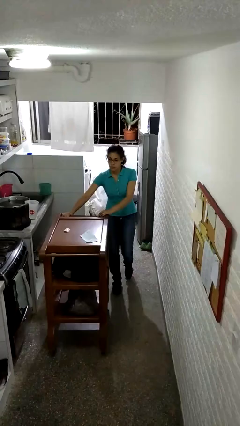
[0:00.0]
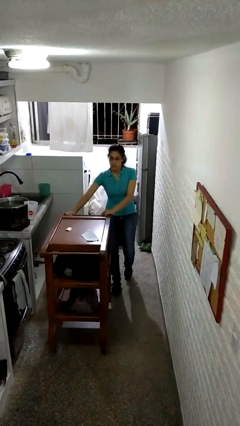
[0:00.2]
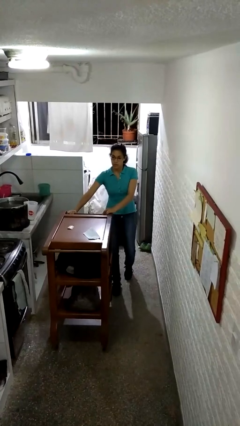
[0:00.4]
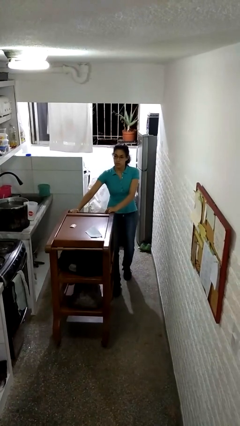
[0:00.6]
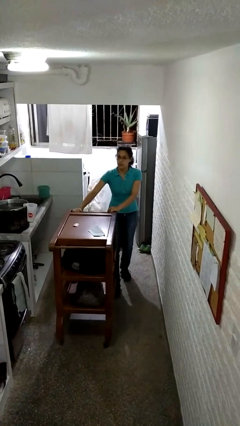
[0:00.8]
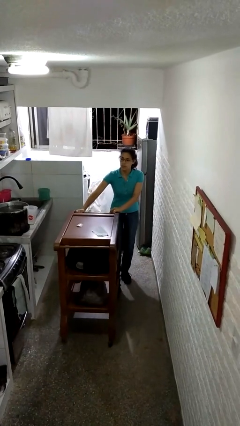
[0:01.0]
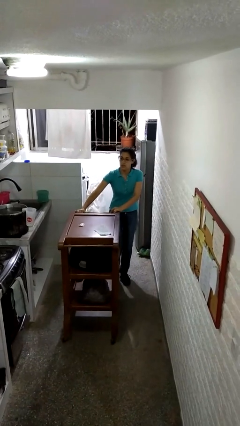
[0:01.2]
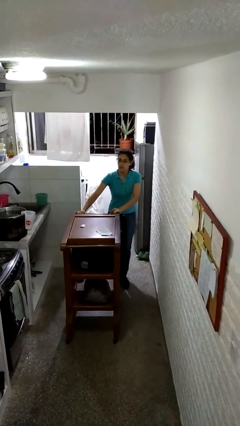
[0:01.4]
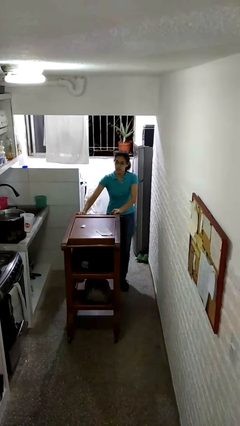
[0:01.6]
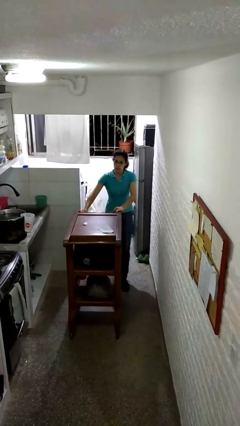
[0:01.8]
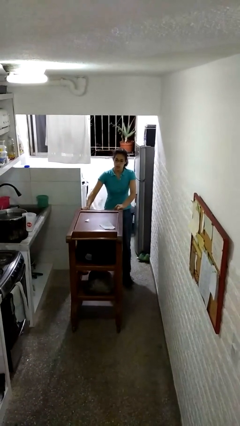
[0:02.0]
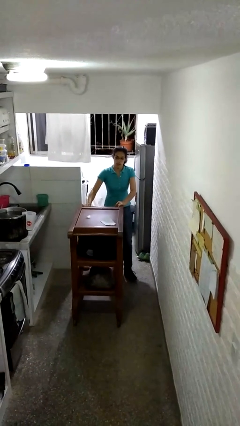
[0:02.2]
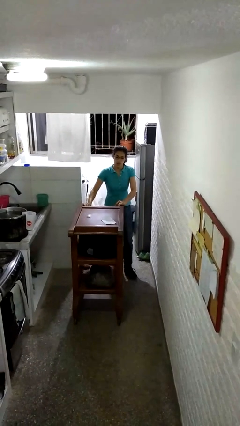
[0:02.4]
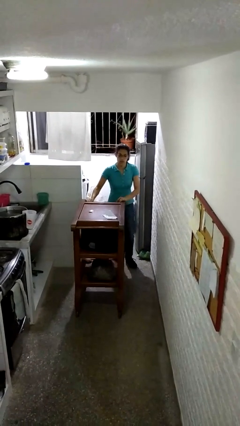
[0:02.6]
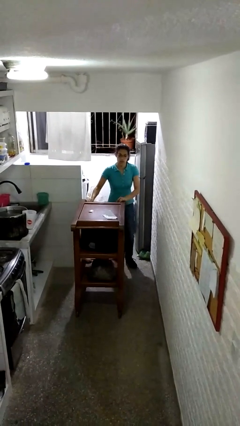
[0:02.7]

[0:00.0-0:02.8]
person pulls wheeled cart

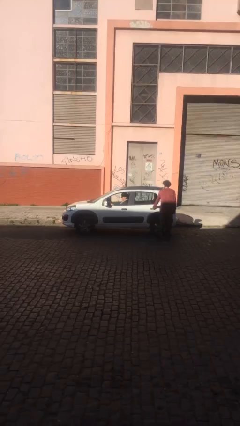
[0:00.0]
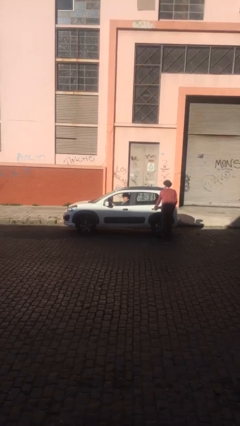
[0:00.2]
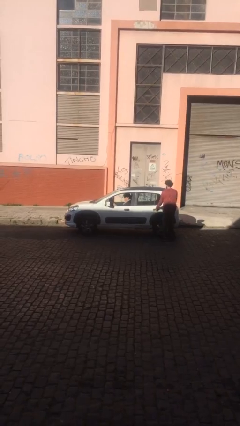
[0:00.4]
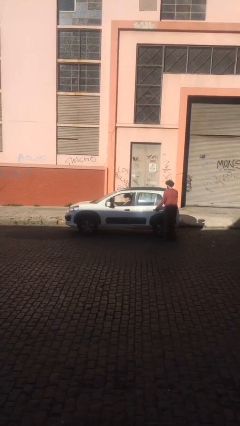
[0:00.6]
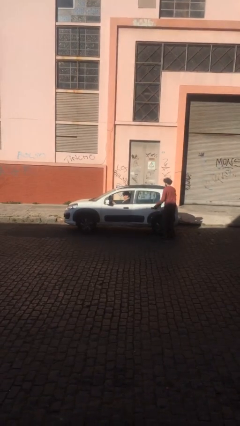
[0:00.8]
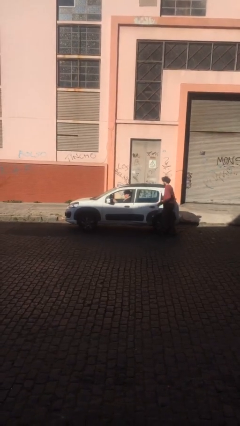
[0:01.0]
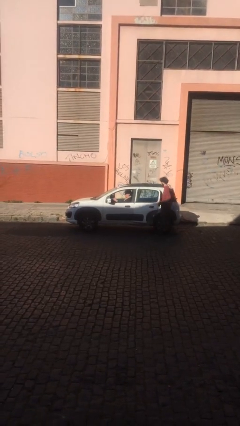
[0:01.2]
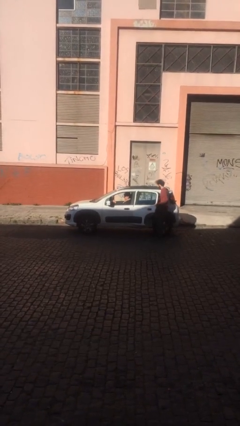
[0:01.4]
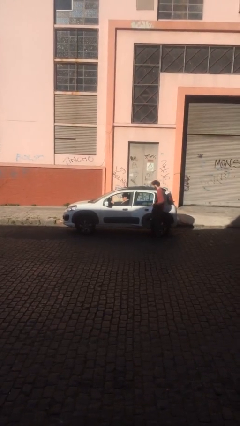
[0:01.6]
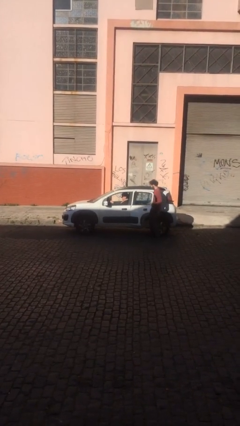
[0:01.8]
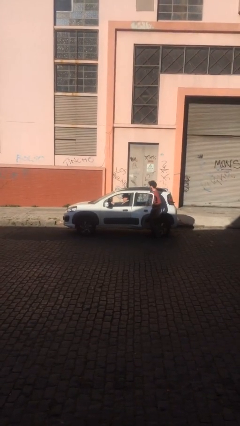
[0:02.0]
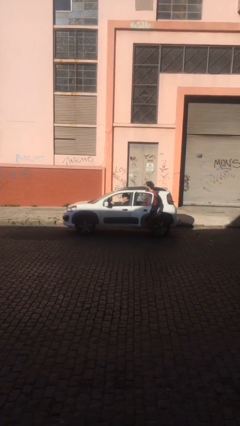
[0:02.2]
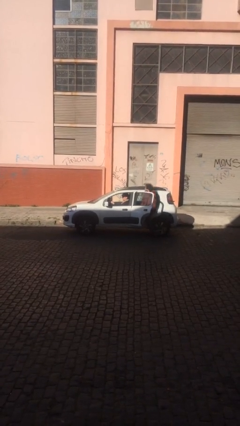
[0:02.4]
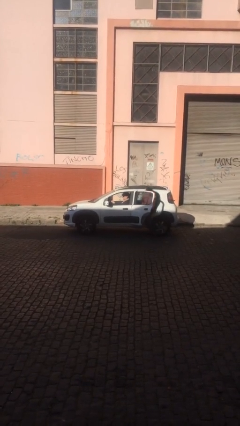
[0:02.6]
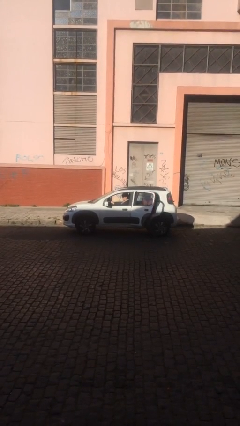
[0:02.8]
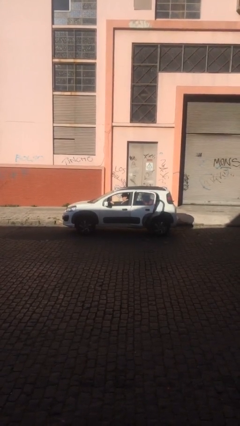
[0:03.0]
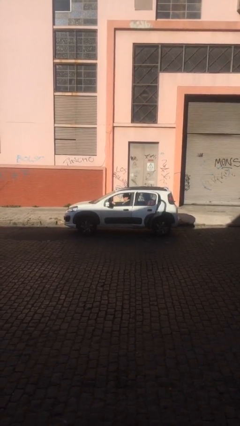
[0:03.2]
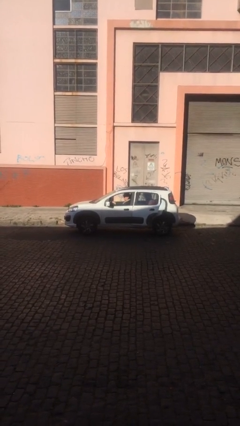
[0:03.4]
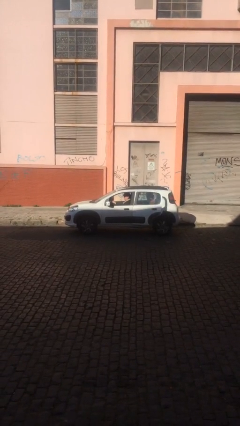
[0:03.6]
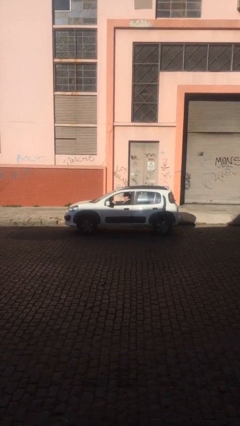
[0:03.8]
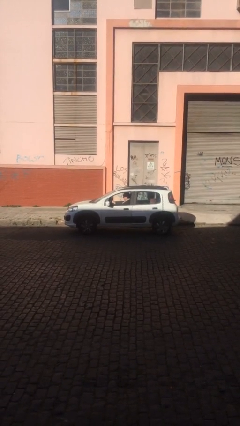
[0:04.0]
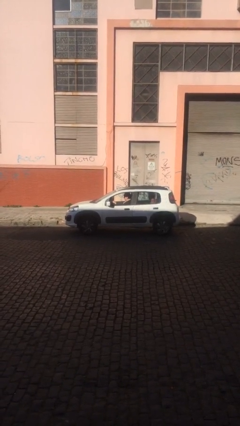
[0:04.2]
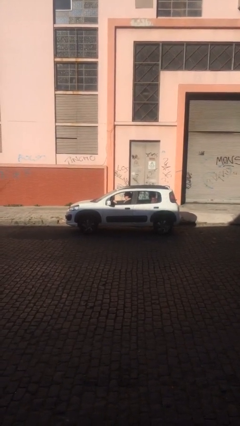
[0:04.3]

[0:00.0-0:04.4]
car picks up person

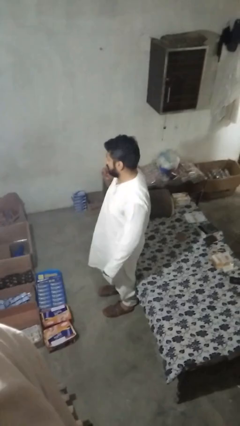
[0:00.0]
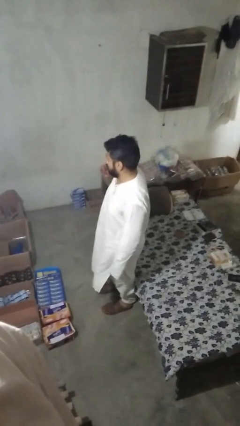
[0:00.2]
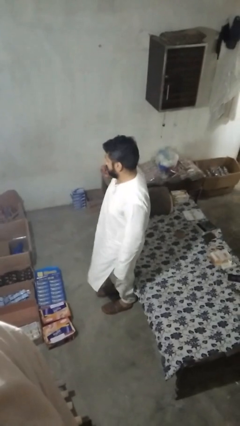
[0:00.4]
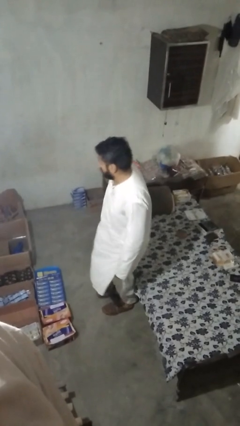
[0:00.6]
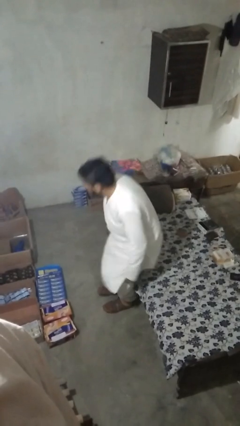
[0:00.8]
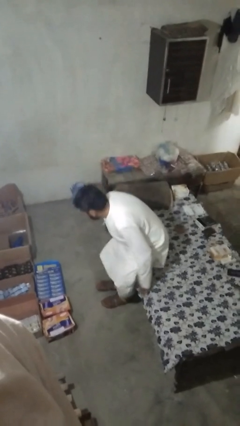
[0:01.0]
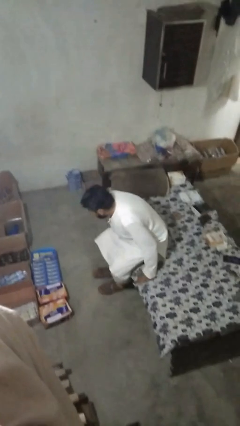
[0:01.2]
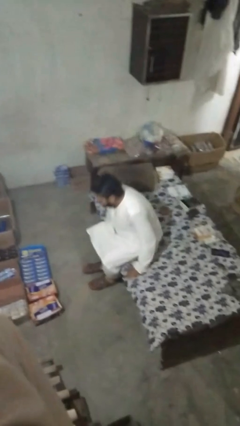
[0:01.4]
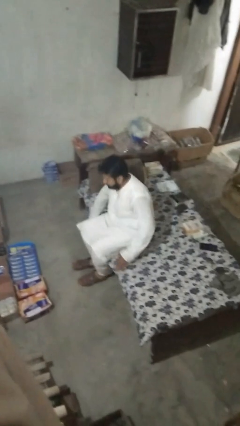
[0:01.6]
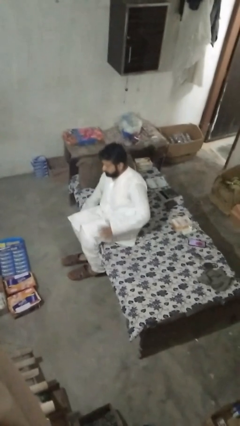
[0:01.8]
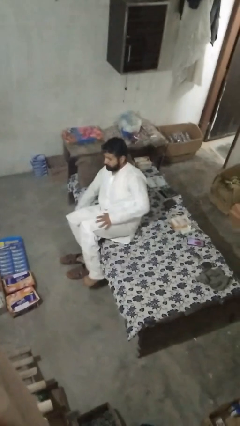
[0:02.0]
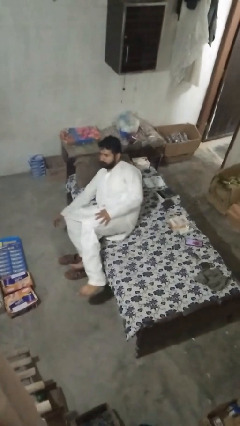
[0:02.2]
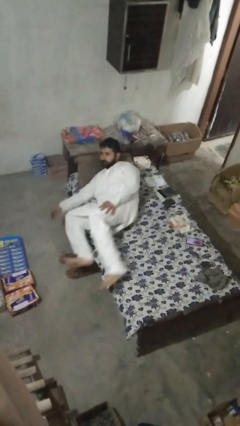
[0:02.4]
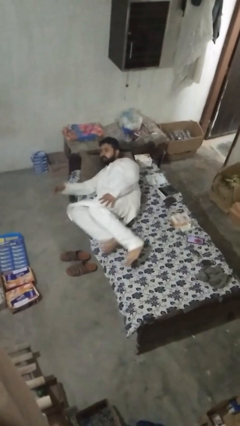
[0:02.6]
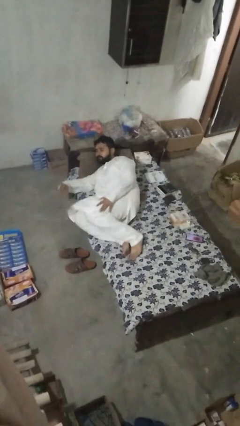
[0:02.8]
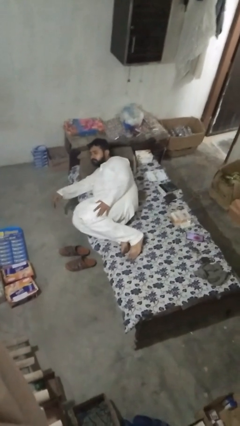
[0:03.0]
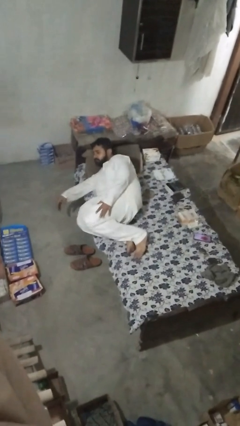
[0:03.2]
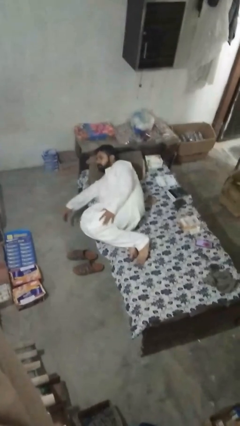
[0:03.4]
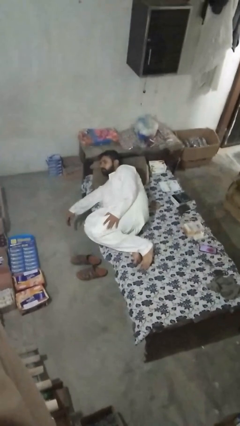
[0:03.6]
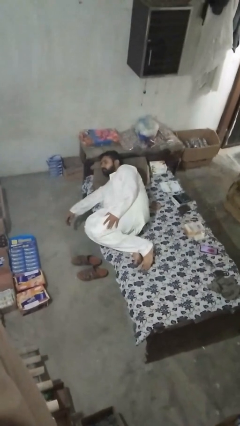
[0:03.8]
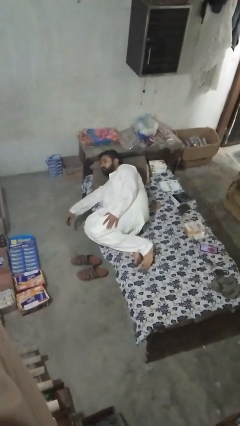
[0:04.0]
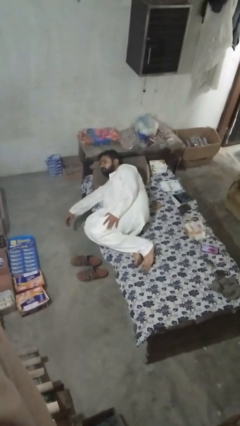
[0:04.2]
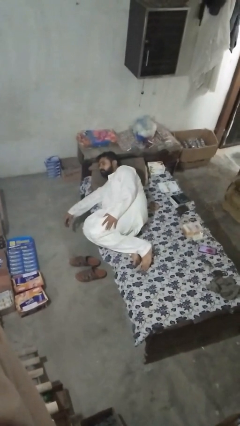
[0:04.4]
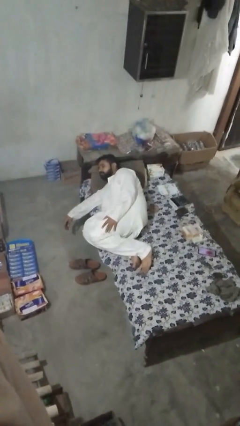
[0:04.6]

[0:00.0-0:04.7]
person lies down on bed

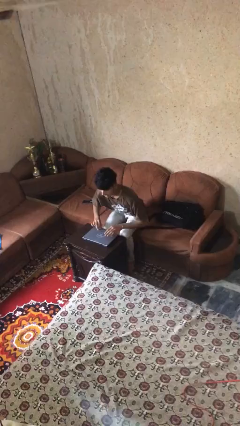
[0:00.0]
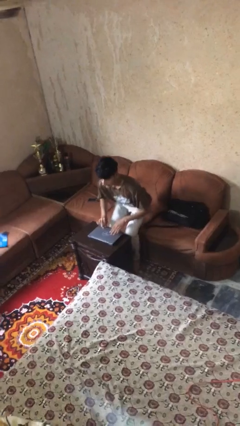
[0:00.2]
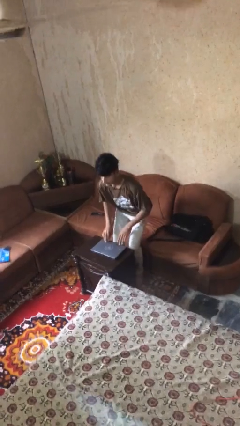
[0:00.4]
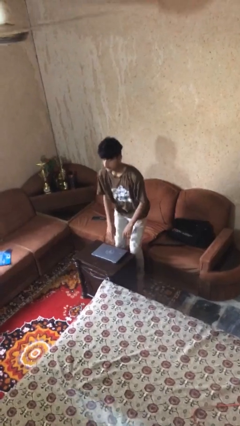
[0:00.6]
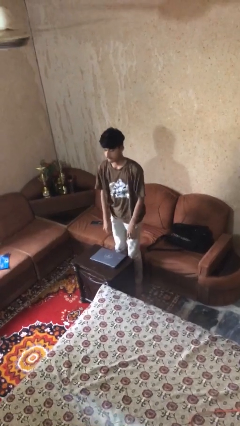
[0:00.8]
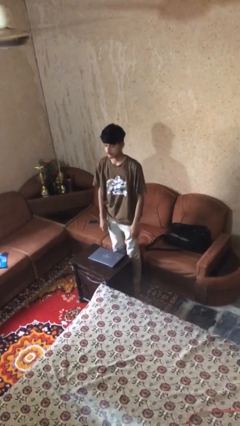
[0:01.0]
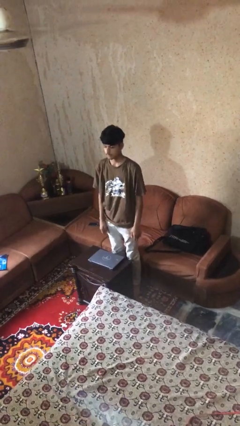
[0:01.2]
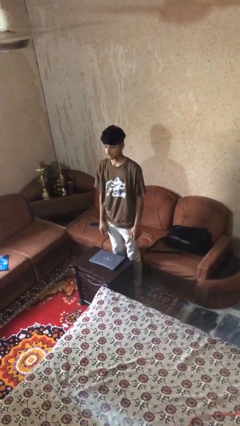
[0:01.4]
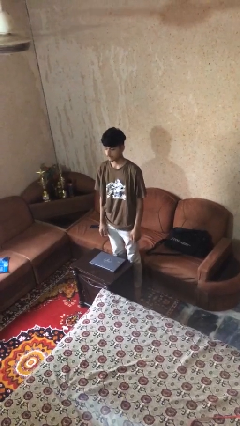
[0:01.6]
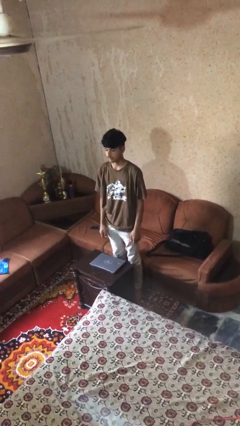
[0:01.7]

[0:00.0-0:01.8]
person stands up

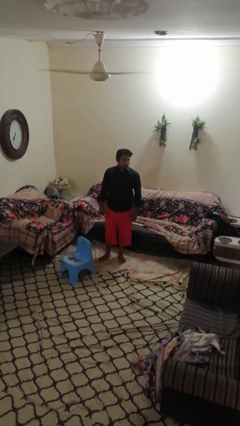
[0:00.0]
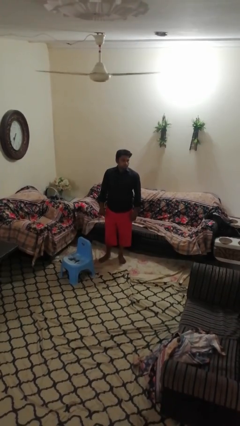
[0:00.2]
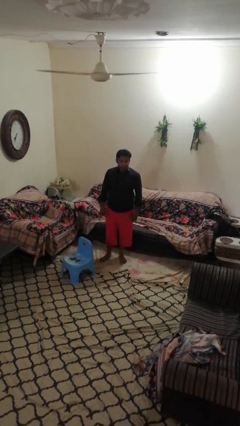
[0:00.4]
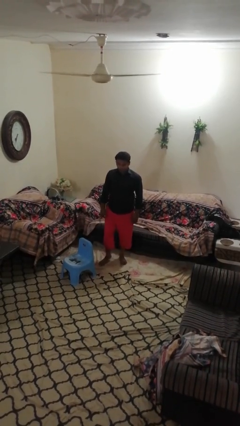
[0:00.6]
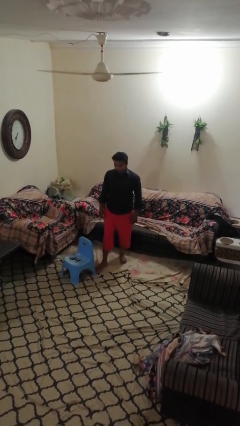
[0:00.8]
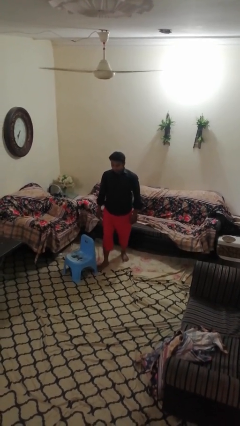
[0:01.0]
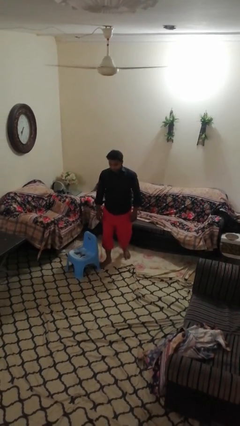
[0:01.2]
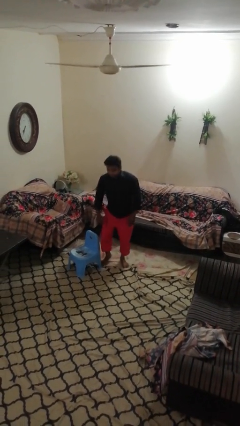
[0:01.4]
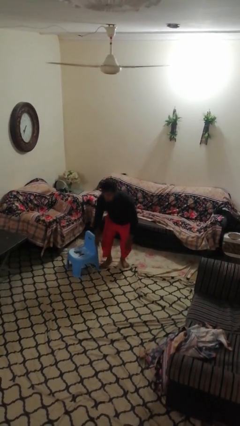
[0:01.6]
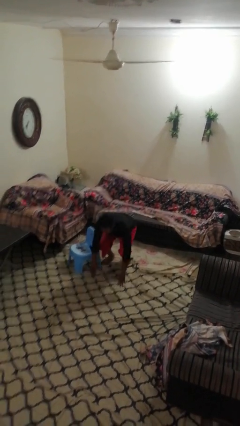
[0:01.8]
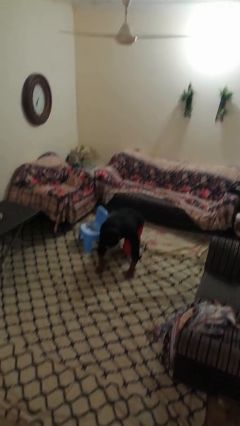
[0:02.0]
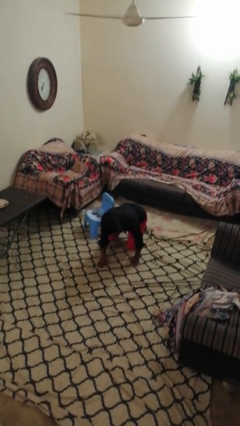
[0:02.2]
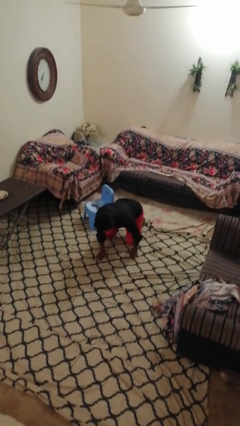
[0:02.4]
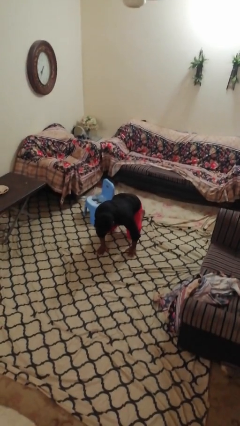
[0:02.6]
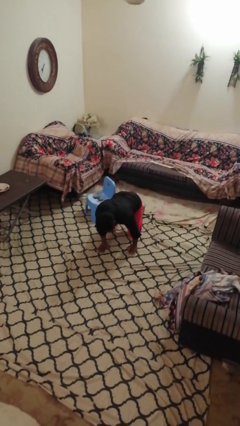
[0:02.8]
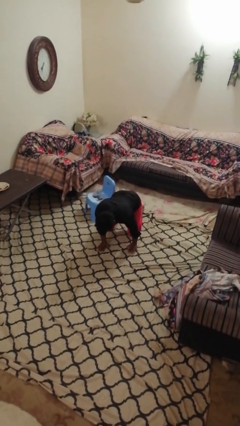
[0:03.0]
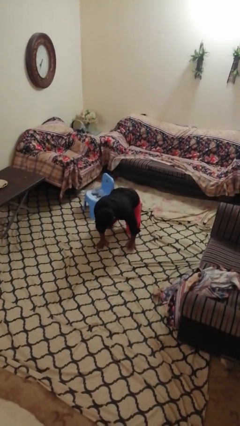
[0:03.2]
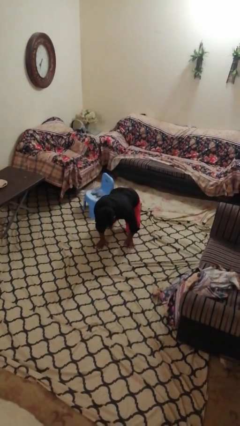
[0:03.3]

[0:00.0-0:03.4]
person trips on object on floor
